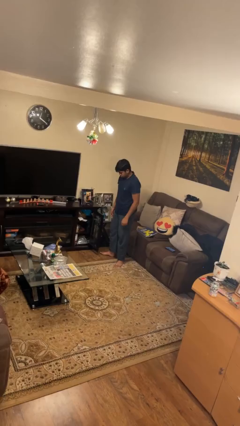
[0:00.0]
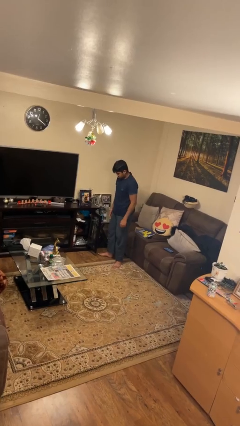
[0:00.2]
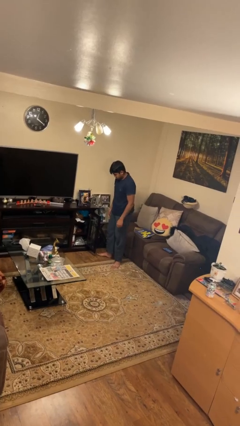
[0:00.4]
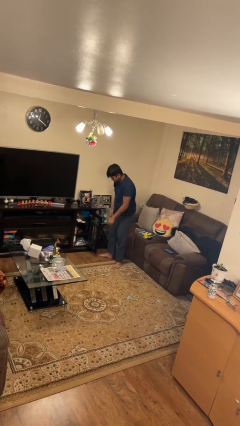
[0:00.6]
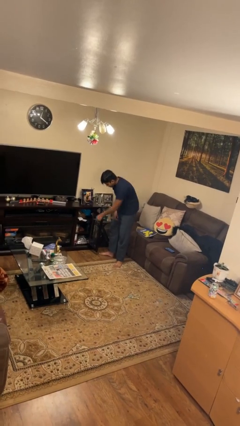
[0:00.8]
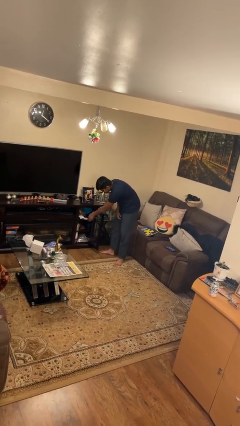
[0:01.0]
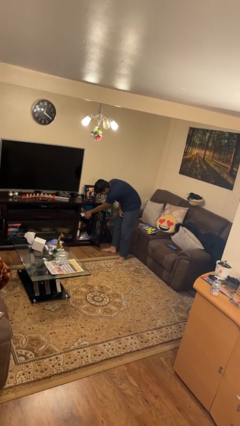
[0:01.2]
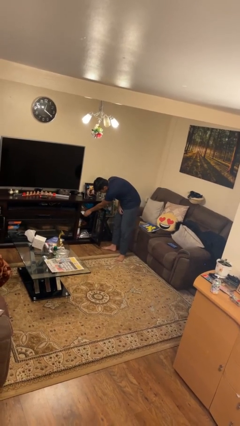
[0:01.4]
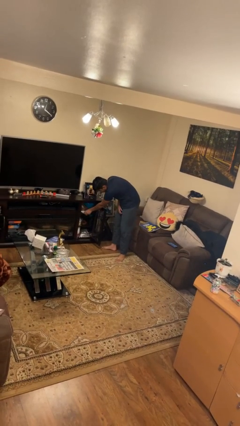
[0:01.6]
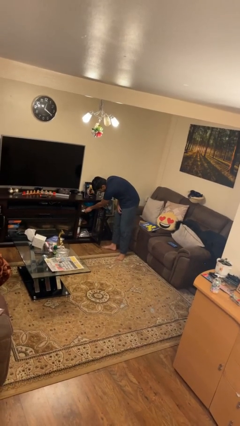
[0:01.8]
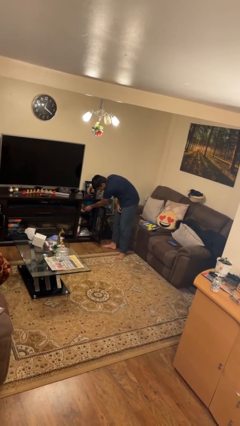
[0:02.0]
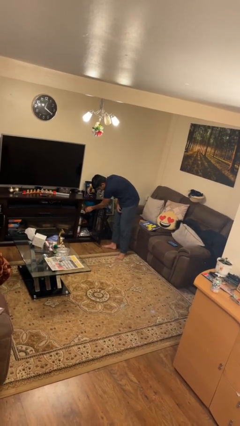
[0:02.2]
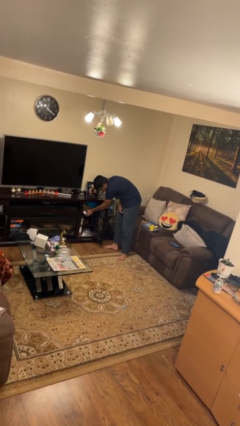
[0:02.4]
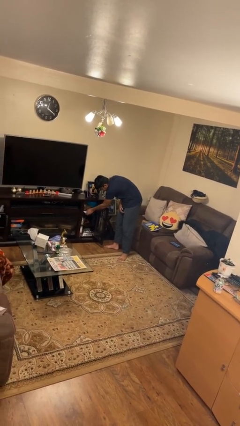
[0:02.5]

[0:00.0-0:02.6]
person searches in cabinet

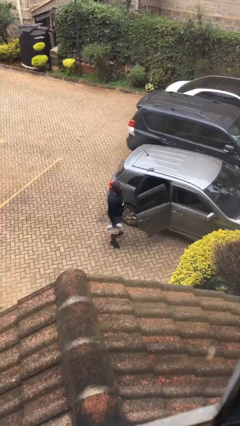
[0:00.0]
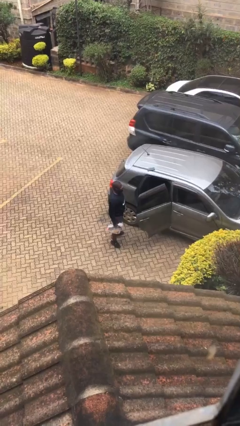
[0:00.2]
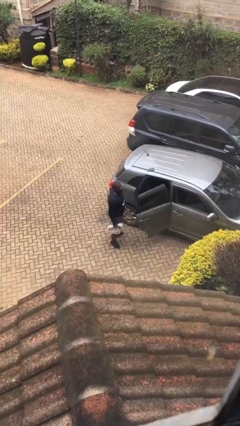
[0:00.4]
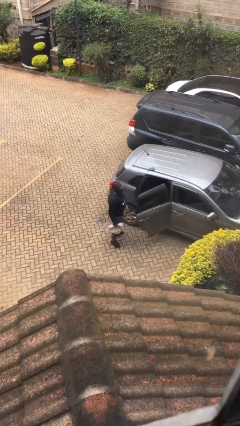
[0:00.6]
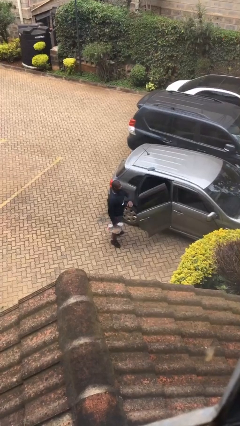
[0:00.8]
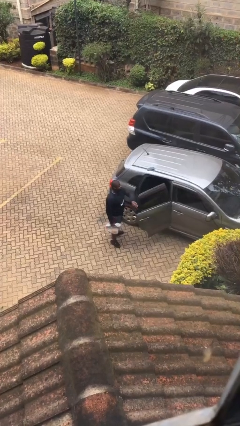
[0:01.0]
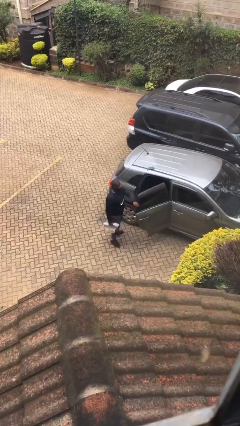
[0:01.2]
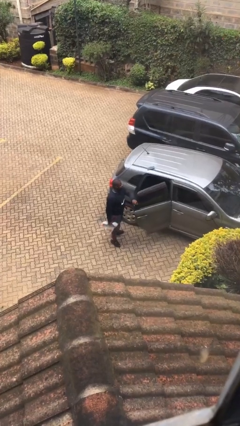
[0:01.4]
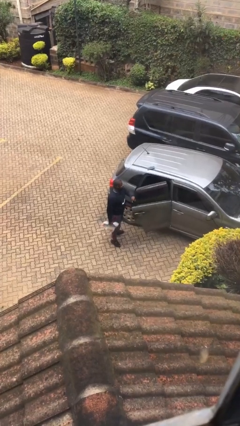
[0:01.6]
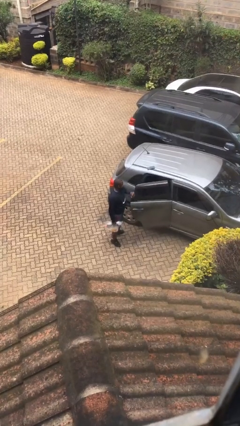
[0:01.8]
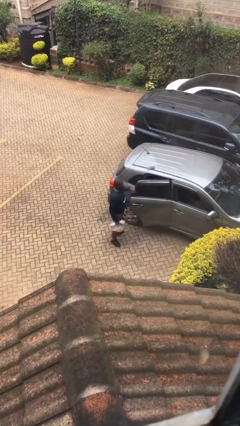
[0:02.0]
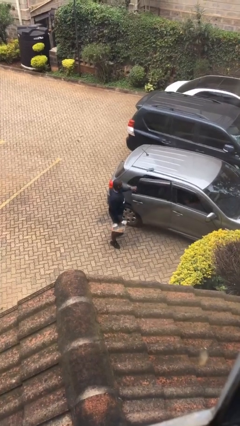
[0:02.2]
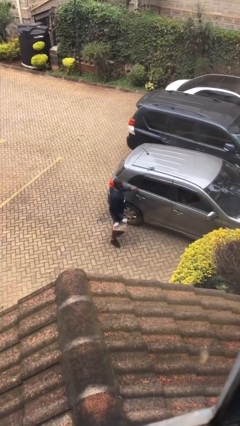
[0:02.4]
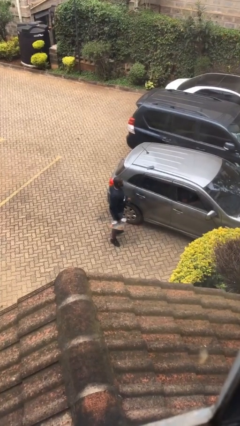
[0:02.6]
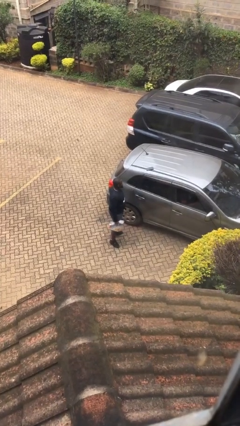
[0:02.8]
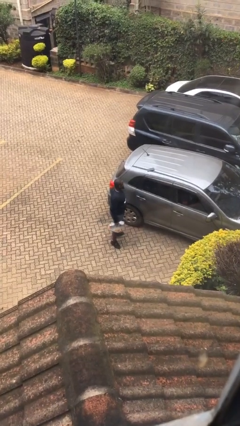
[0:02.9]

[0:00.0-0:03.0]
person closes car door

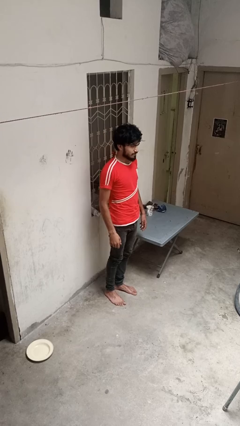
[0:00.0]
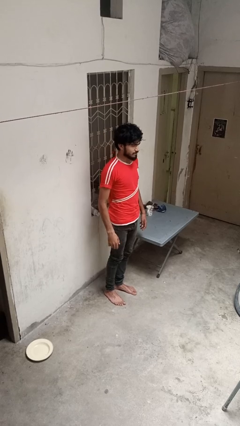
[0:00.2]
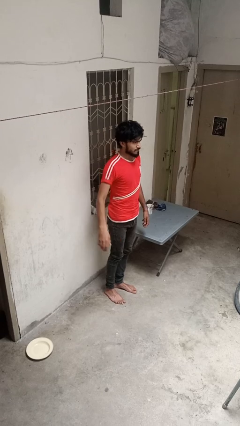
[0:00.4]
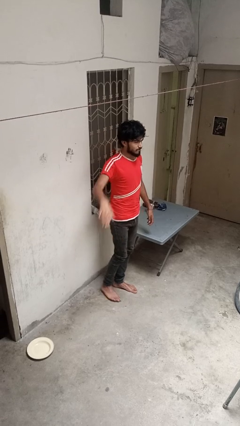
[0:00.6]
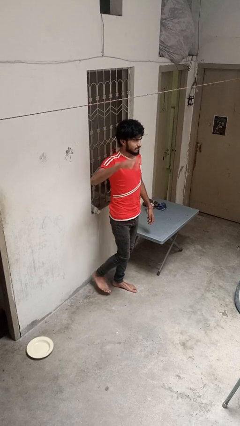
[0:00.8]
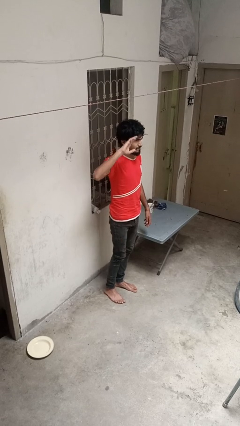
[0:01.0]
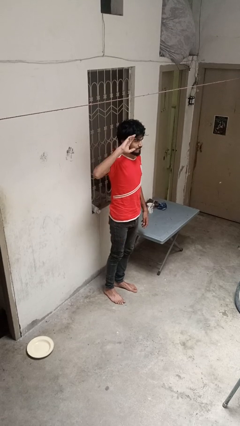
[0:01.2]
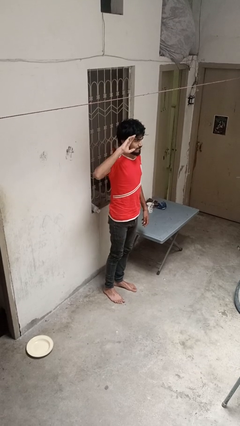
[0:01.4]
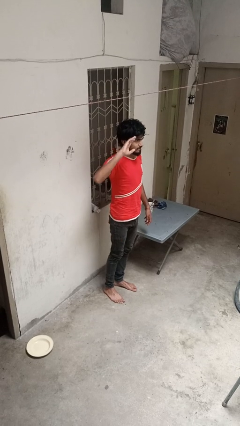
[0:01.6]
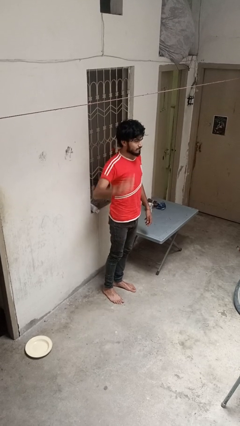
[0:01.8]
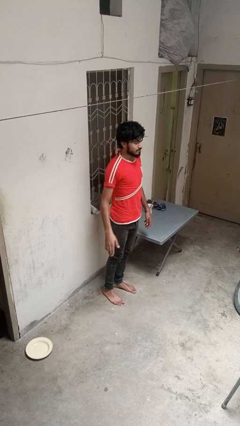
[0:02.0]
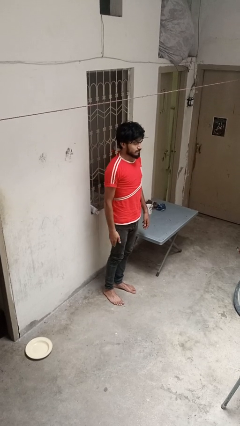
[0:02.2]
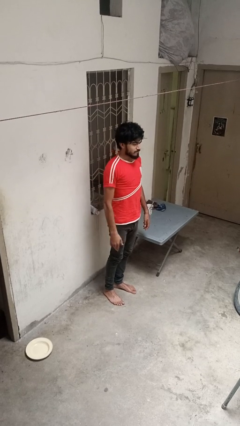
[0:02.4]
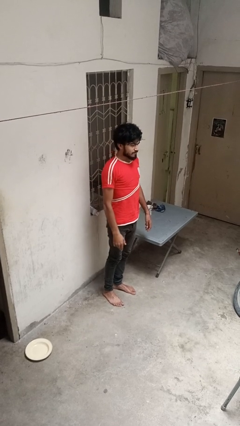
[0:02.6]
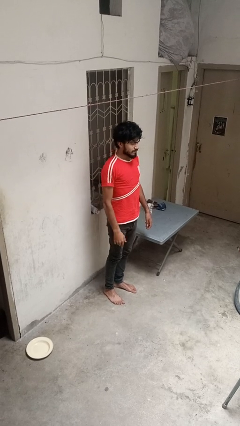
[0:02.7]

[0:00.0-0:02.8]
person salutes

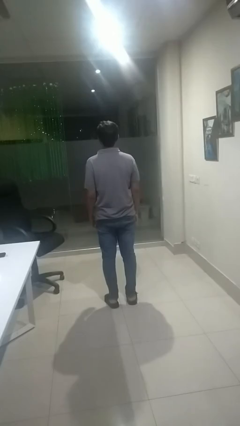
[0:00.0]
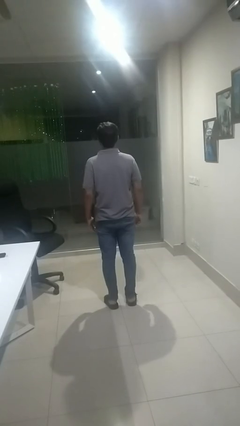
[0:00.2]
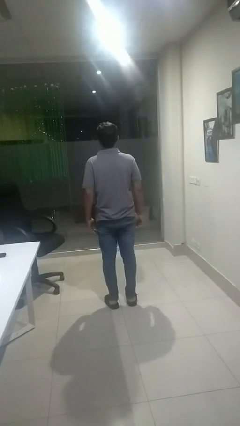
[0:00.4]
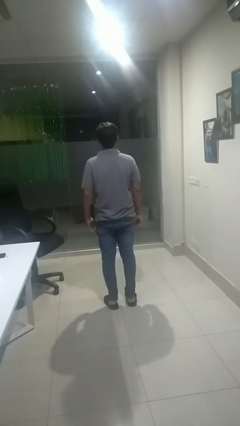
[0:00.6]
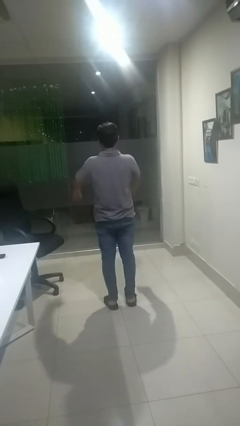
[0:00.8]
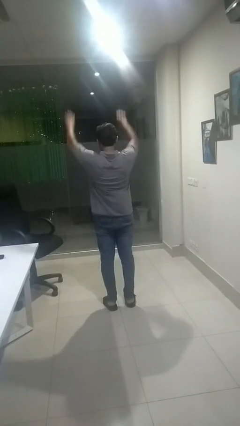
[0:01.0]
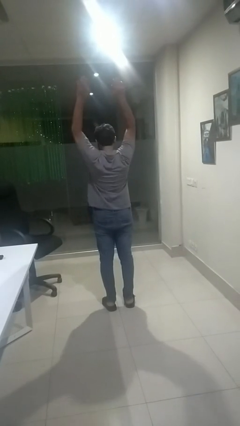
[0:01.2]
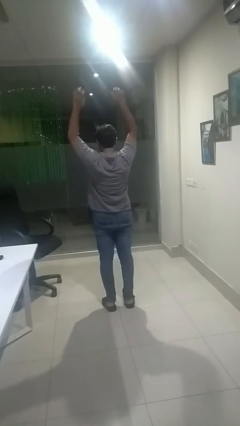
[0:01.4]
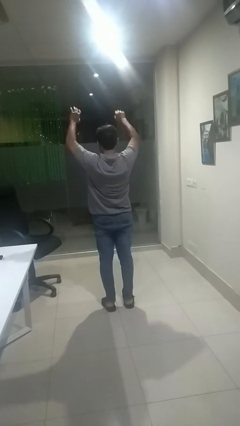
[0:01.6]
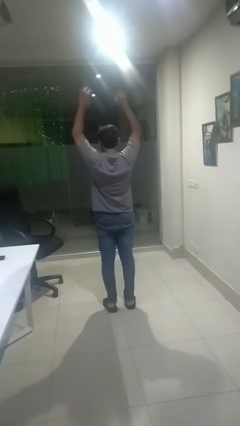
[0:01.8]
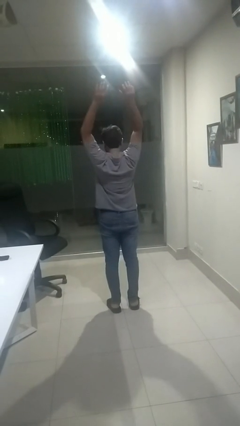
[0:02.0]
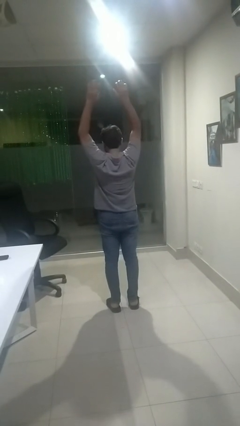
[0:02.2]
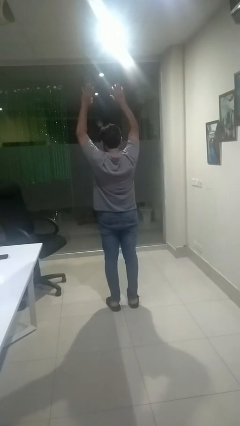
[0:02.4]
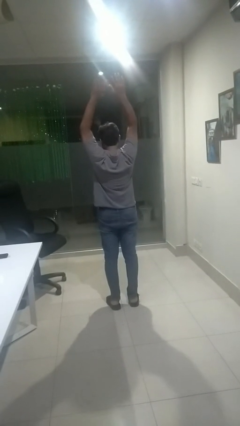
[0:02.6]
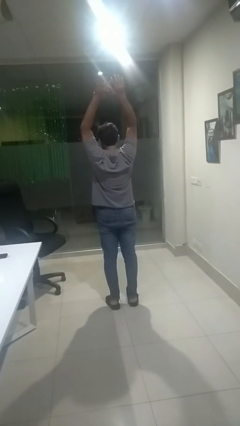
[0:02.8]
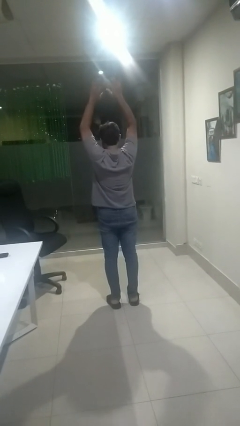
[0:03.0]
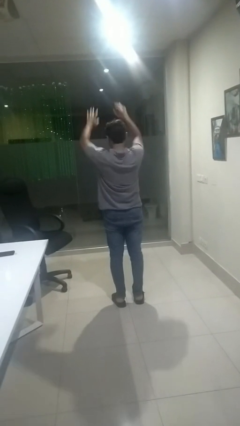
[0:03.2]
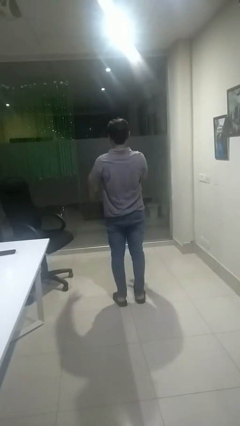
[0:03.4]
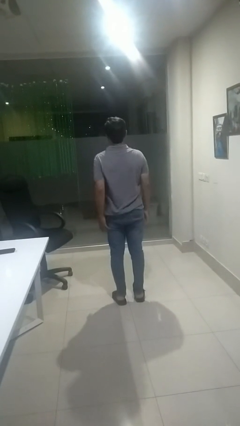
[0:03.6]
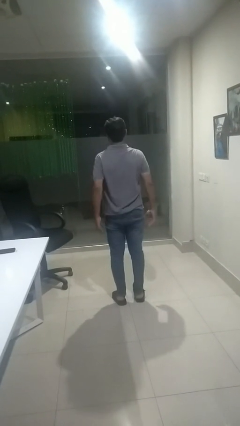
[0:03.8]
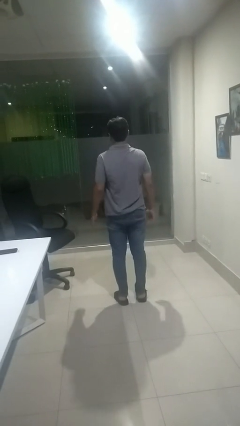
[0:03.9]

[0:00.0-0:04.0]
person stretches arms over head

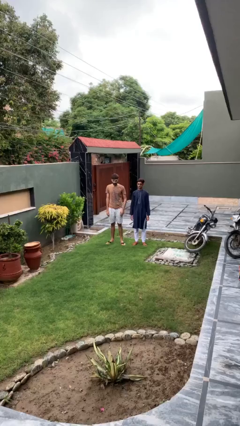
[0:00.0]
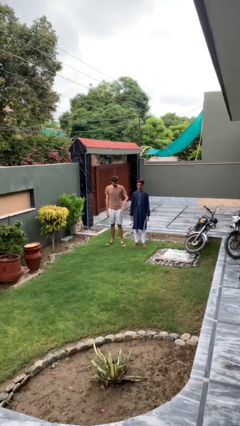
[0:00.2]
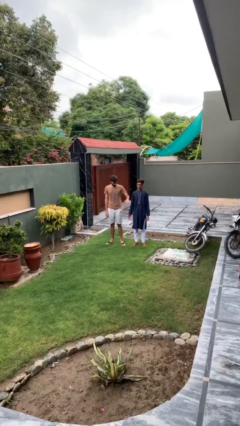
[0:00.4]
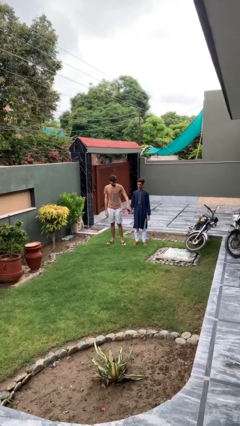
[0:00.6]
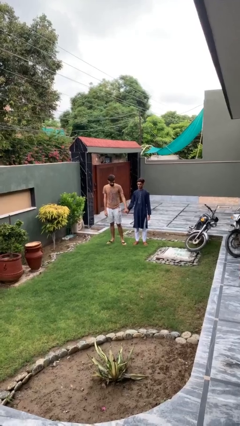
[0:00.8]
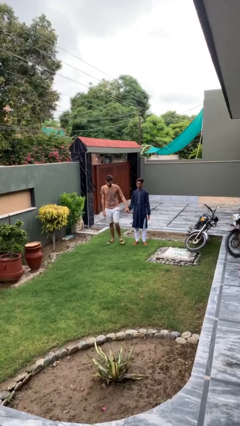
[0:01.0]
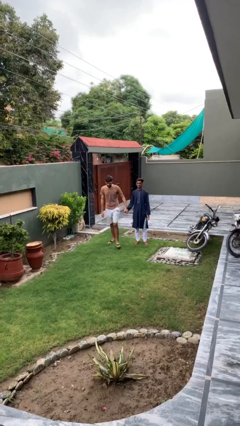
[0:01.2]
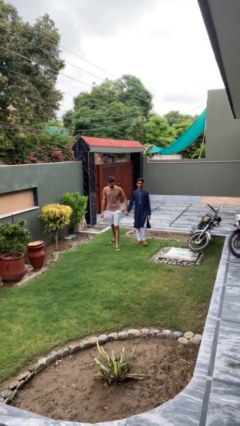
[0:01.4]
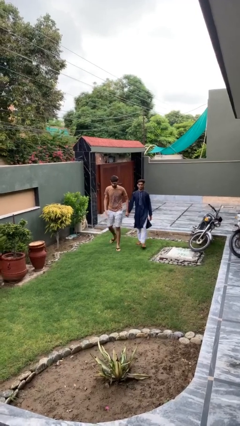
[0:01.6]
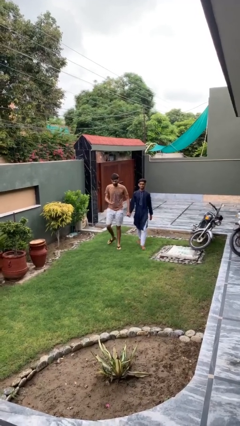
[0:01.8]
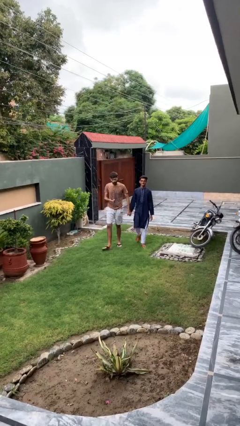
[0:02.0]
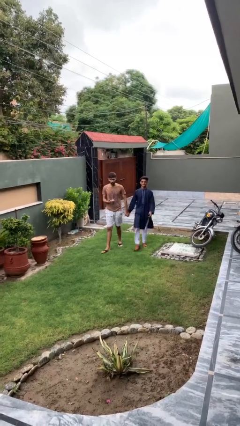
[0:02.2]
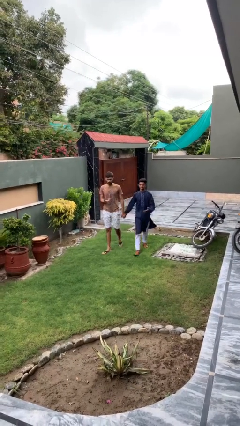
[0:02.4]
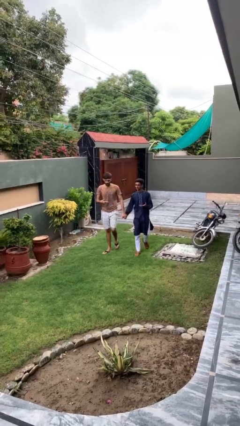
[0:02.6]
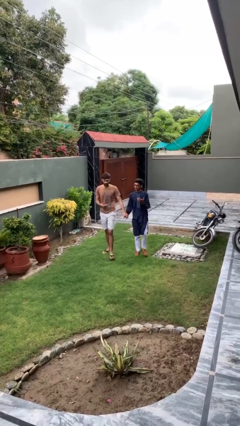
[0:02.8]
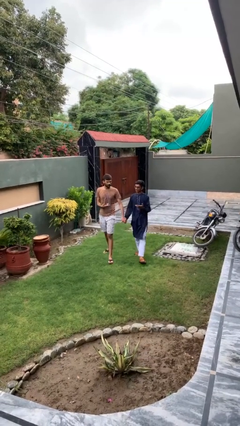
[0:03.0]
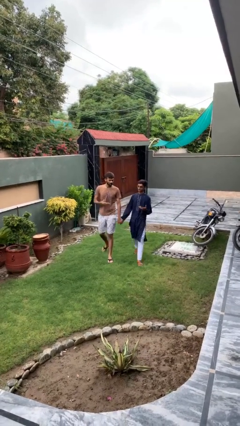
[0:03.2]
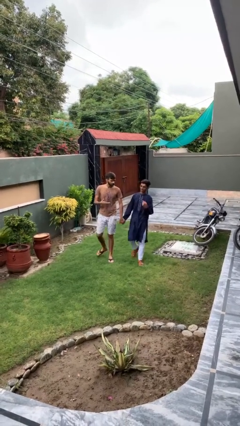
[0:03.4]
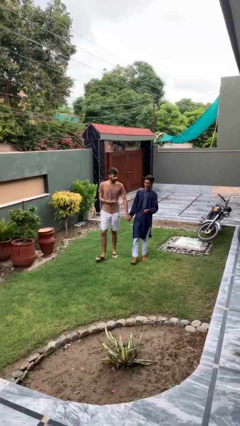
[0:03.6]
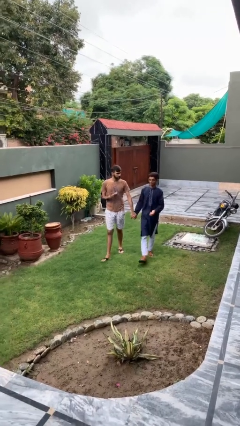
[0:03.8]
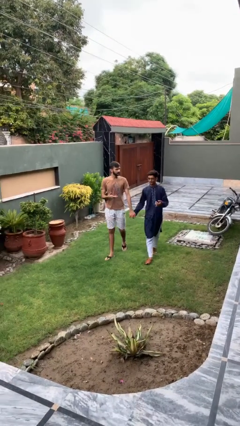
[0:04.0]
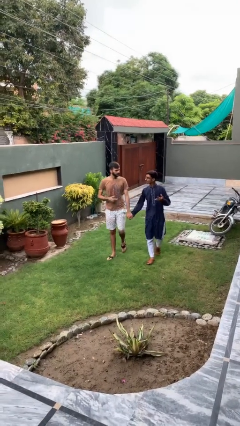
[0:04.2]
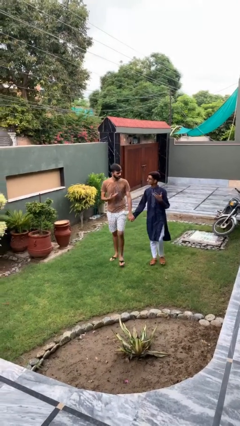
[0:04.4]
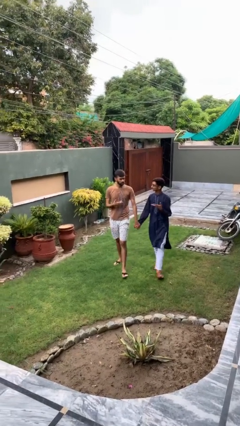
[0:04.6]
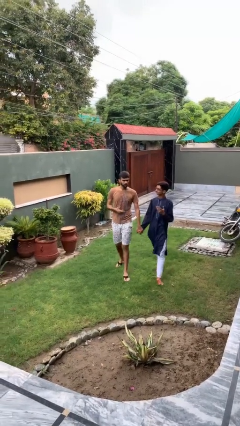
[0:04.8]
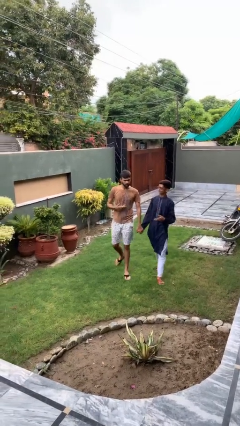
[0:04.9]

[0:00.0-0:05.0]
person holds hand

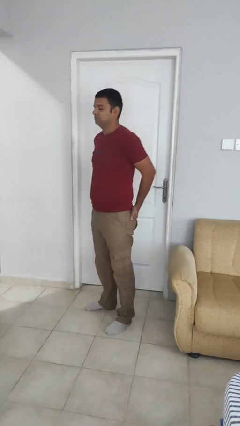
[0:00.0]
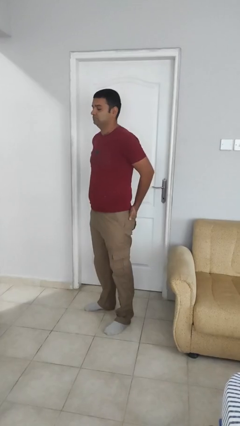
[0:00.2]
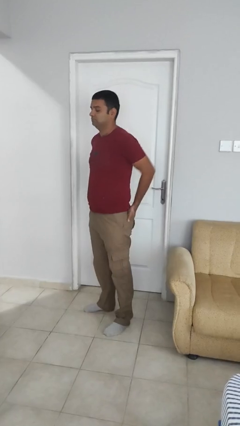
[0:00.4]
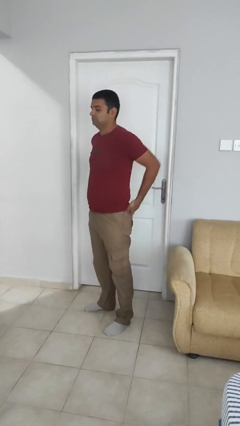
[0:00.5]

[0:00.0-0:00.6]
person puts hands in back pockets
